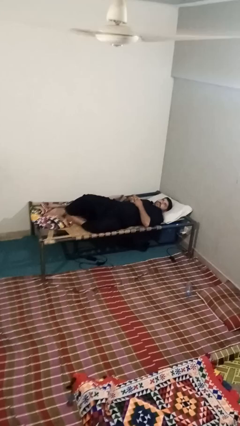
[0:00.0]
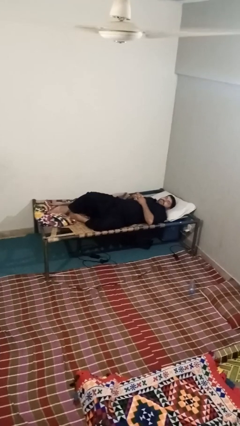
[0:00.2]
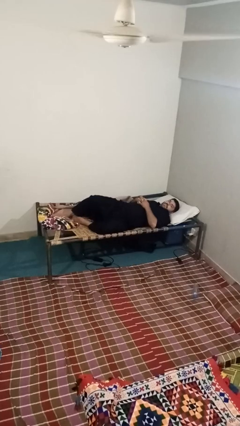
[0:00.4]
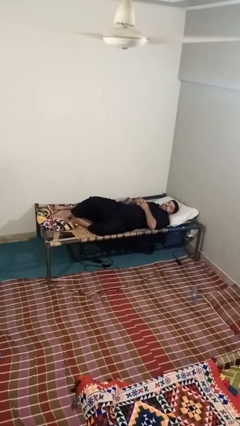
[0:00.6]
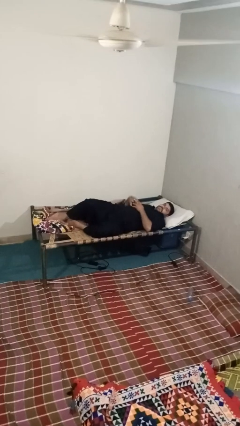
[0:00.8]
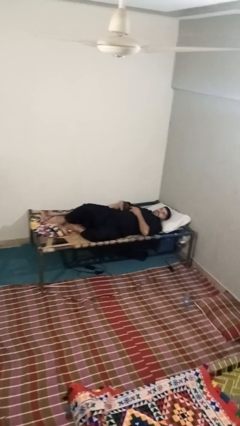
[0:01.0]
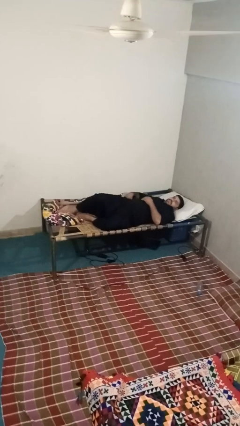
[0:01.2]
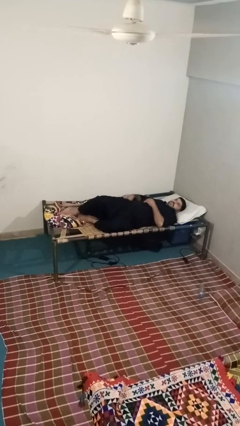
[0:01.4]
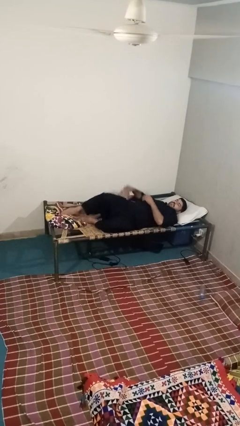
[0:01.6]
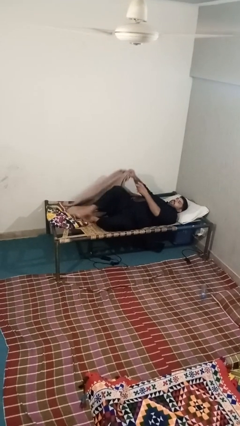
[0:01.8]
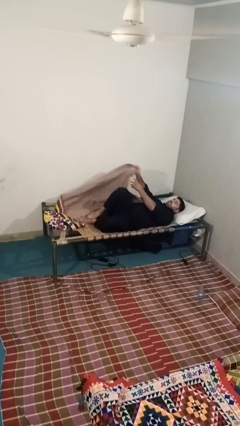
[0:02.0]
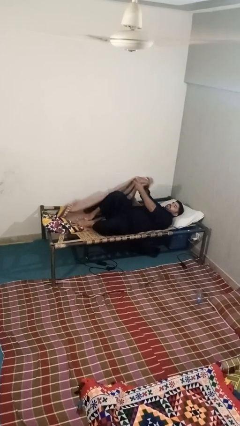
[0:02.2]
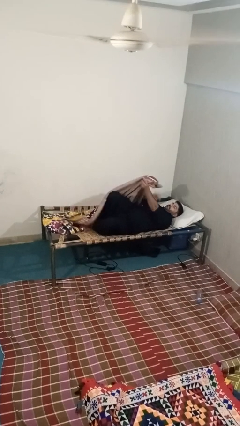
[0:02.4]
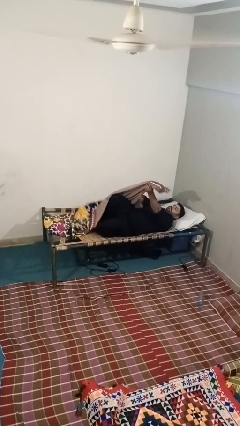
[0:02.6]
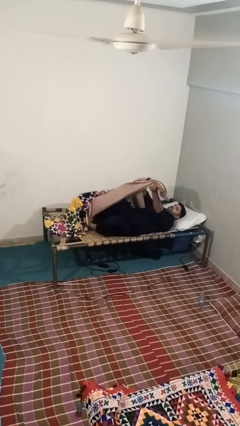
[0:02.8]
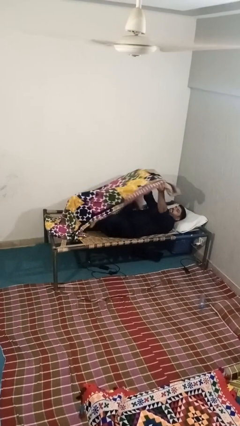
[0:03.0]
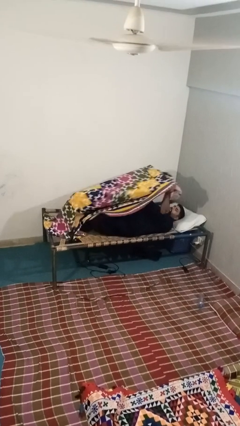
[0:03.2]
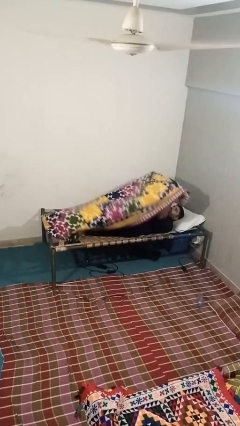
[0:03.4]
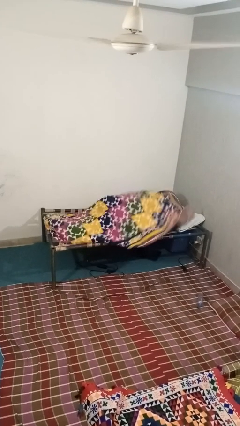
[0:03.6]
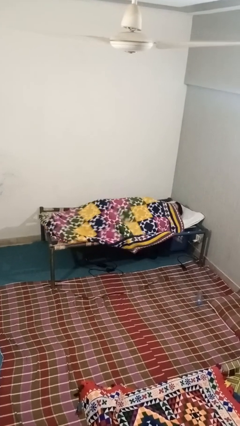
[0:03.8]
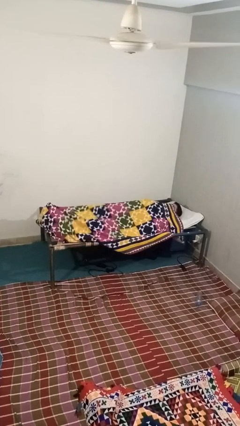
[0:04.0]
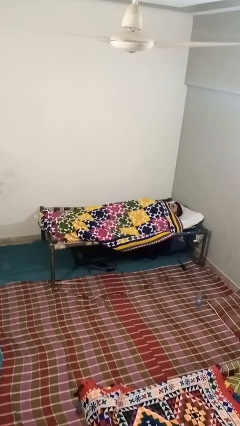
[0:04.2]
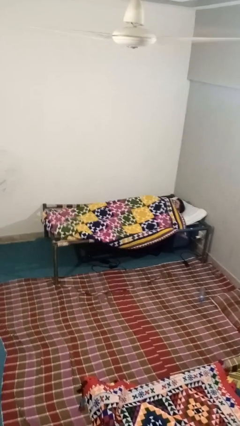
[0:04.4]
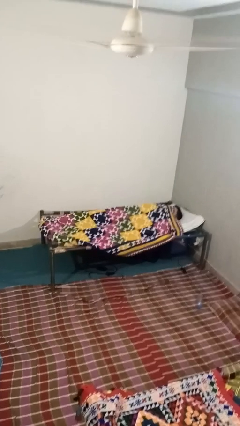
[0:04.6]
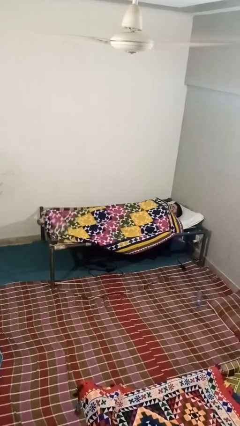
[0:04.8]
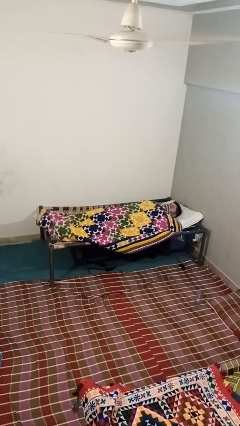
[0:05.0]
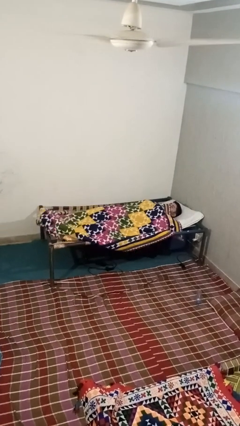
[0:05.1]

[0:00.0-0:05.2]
person covers with blanket

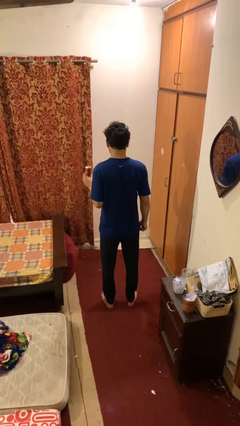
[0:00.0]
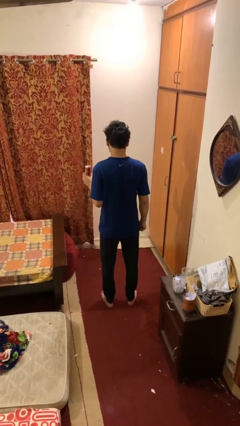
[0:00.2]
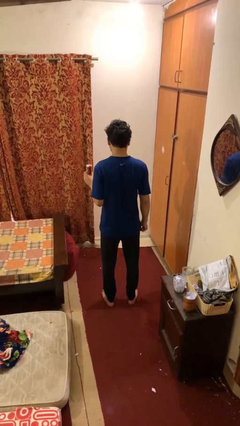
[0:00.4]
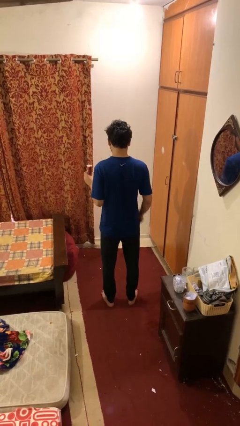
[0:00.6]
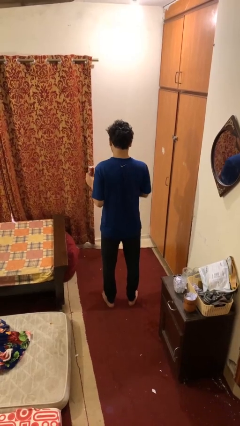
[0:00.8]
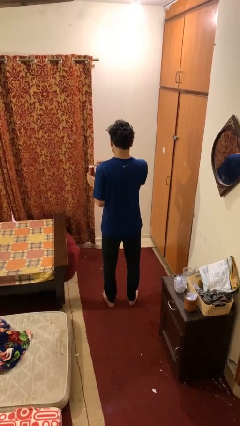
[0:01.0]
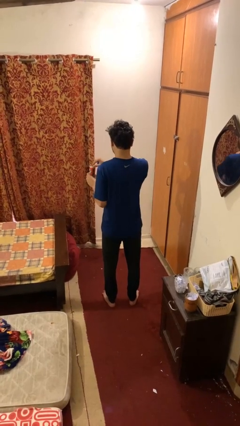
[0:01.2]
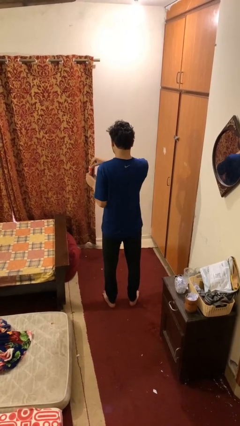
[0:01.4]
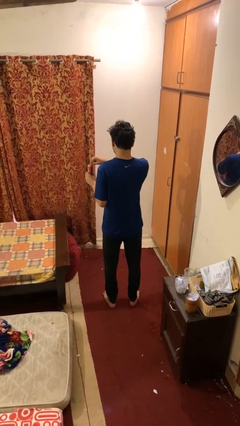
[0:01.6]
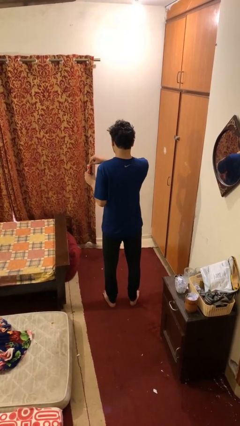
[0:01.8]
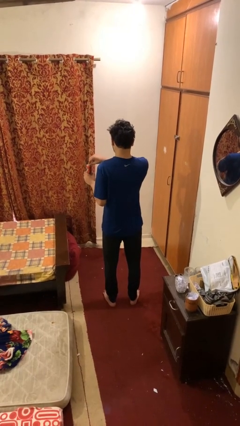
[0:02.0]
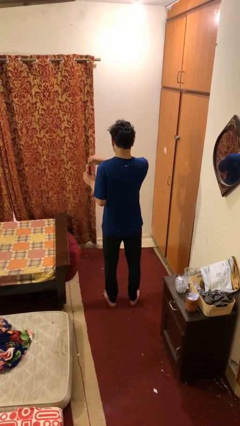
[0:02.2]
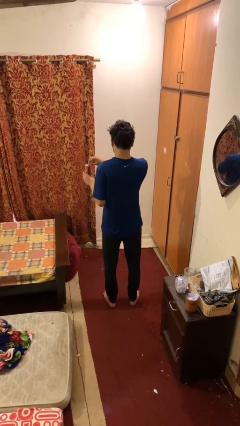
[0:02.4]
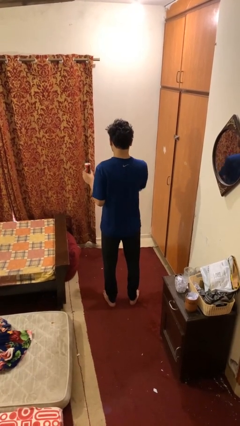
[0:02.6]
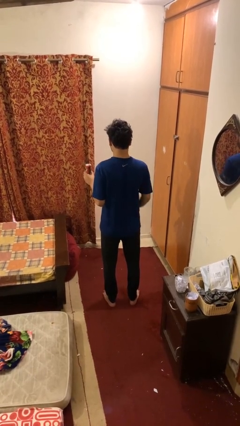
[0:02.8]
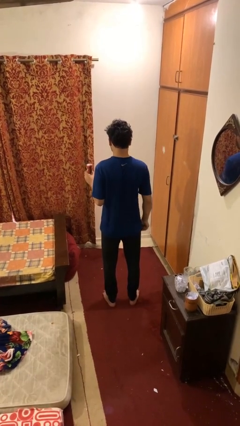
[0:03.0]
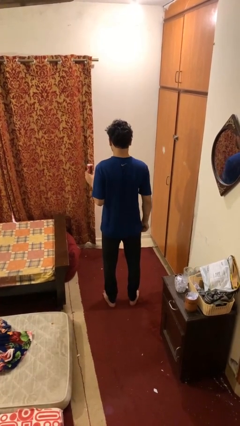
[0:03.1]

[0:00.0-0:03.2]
person opens beverage can

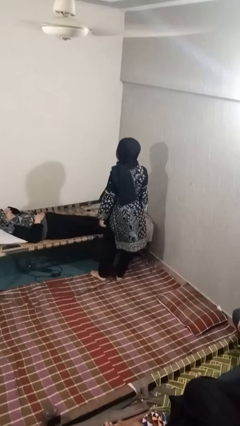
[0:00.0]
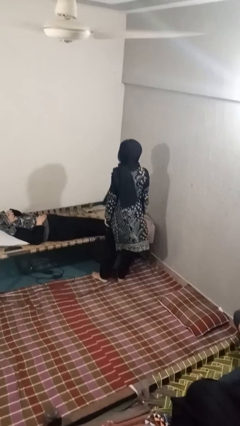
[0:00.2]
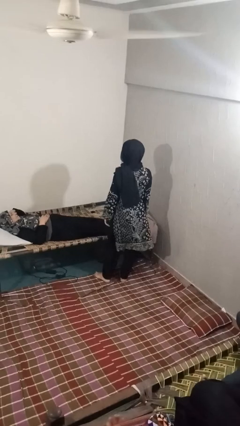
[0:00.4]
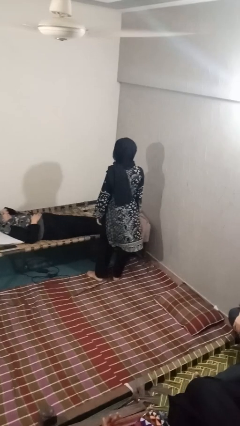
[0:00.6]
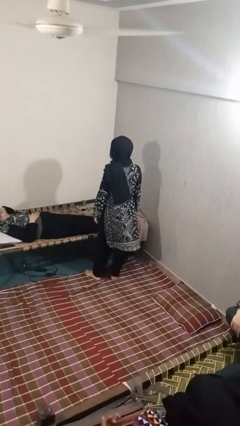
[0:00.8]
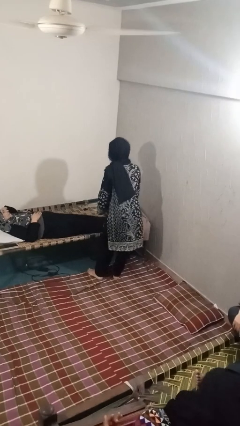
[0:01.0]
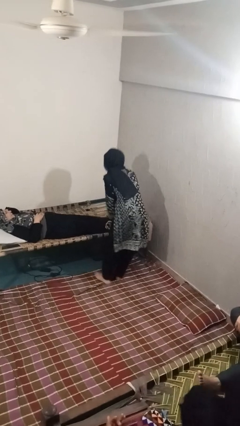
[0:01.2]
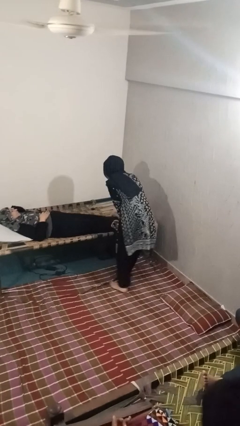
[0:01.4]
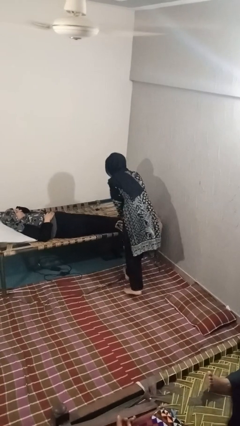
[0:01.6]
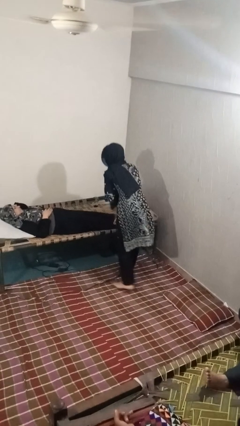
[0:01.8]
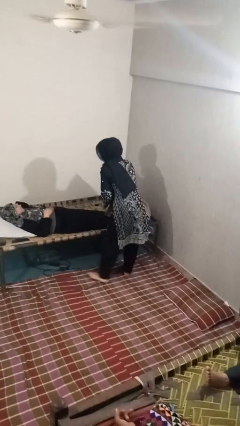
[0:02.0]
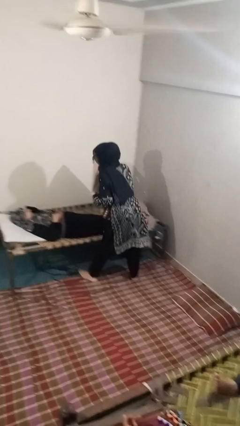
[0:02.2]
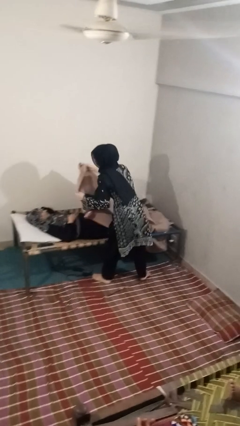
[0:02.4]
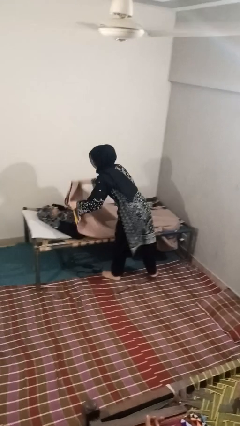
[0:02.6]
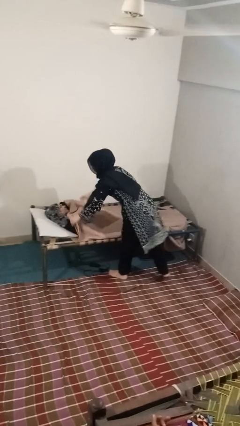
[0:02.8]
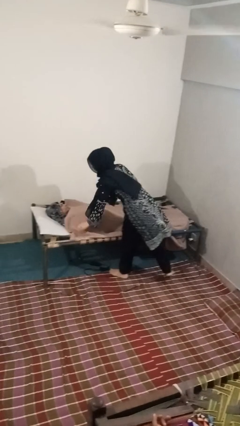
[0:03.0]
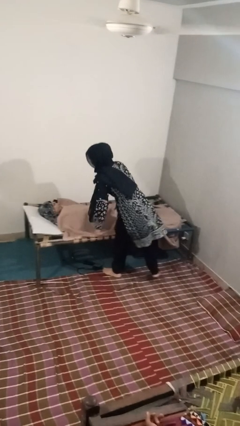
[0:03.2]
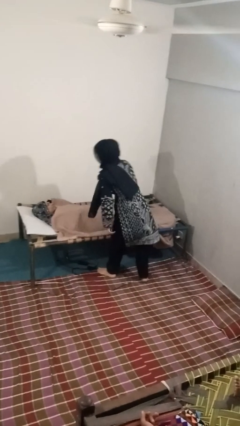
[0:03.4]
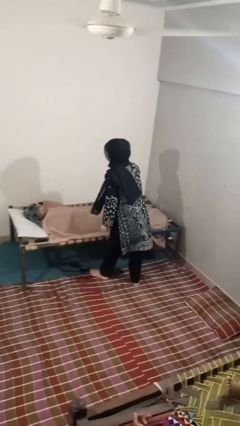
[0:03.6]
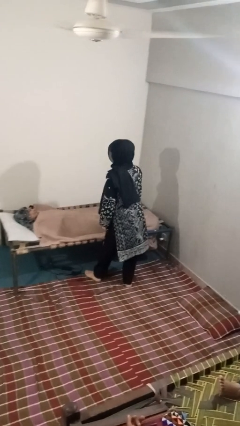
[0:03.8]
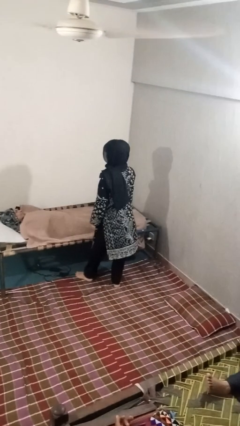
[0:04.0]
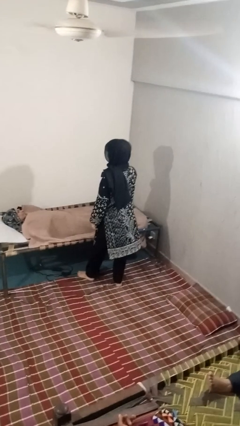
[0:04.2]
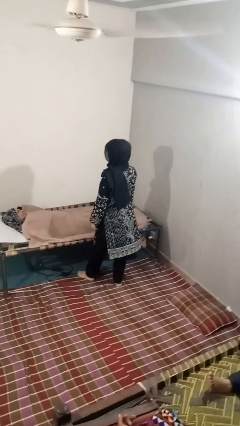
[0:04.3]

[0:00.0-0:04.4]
person covers friend with blanket

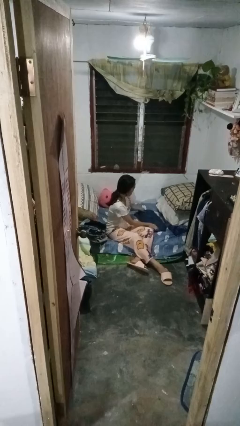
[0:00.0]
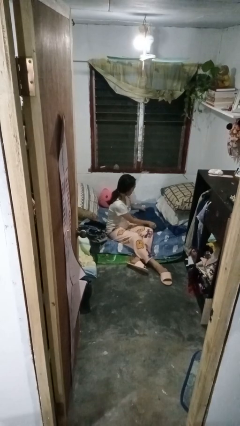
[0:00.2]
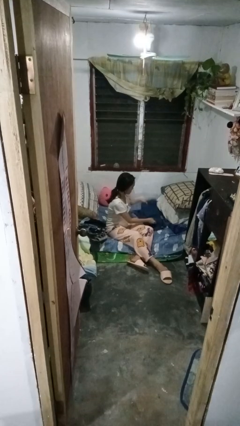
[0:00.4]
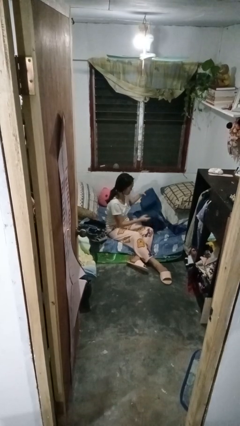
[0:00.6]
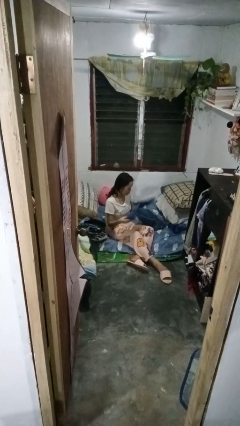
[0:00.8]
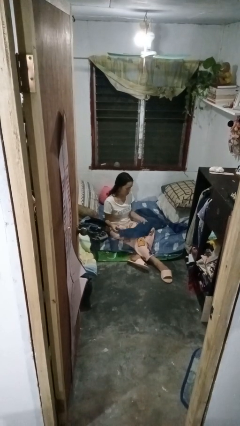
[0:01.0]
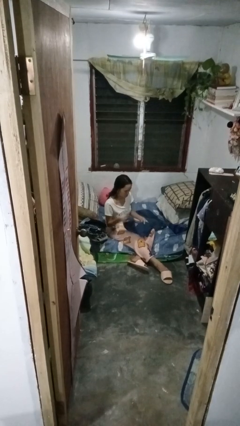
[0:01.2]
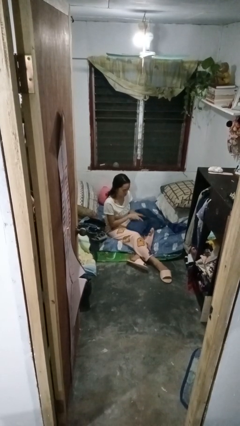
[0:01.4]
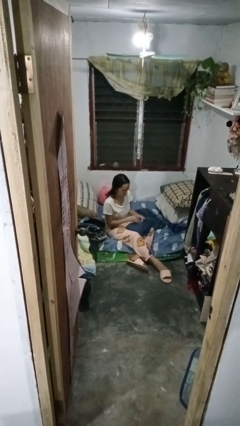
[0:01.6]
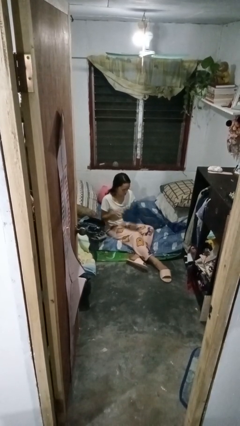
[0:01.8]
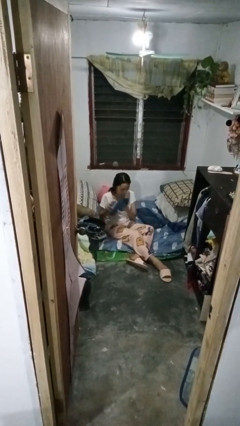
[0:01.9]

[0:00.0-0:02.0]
person folds pants

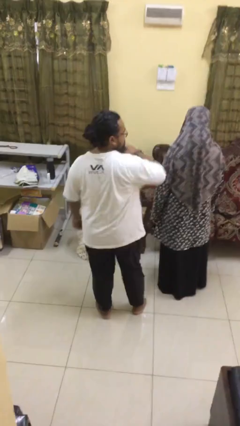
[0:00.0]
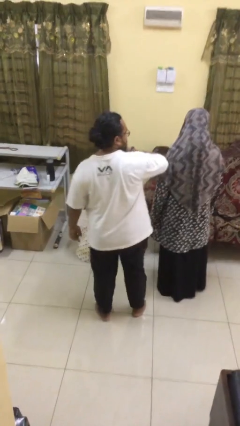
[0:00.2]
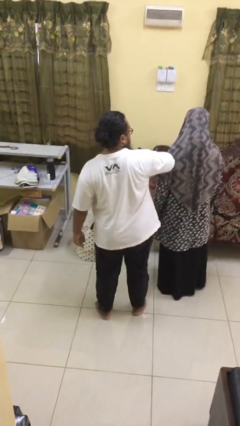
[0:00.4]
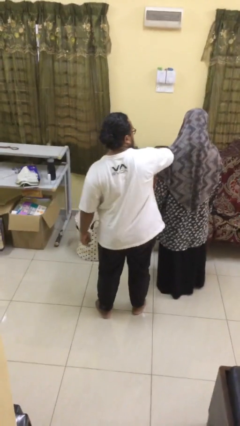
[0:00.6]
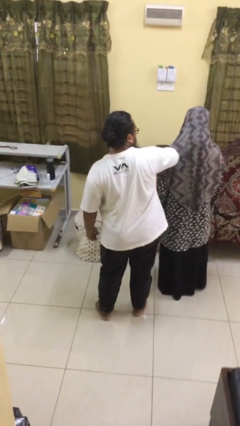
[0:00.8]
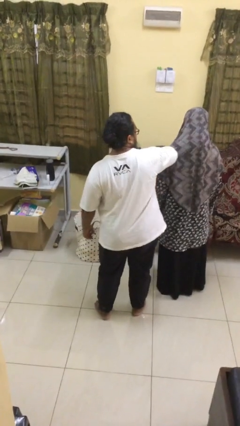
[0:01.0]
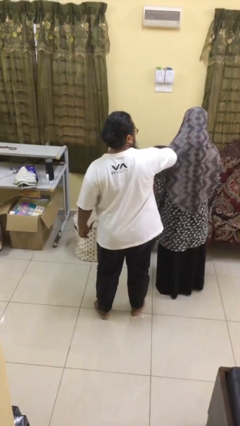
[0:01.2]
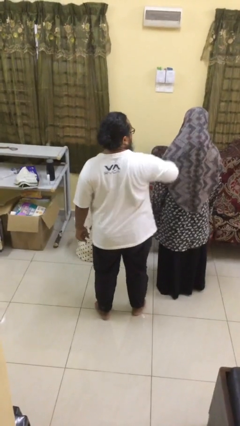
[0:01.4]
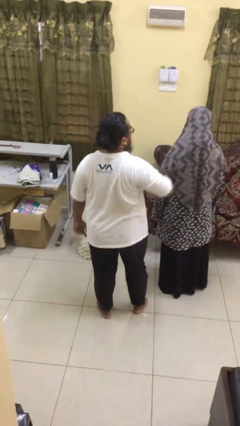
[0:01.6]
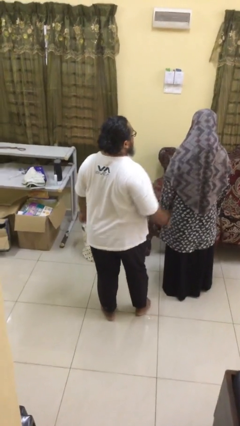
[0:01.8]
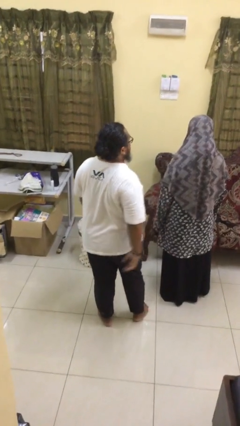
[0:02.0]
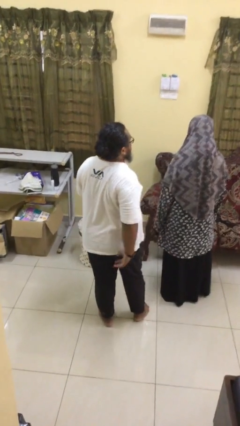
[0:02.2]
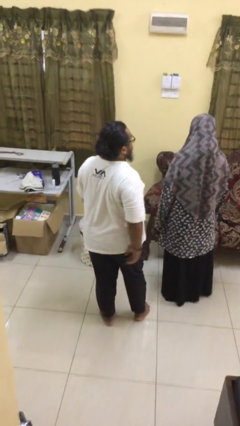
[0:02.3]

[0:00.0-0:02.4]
person nudges person with elbow
